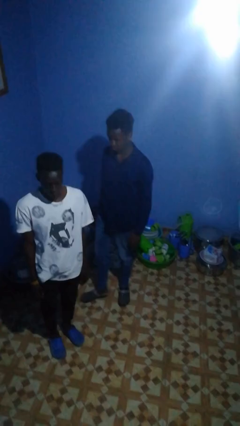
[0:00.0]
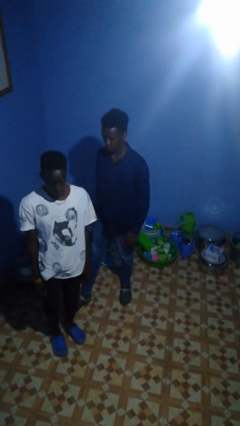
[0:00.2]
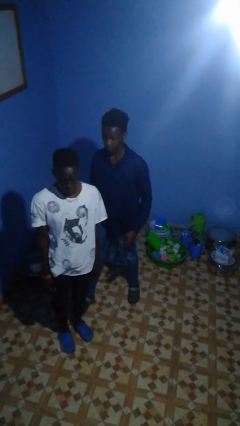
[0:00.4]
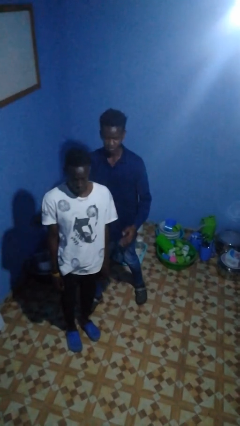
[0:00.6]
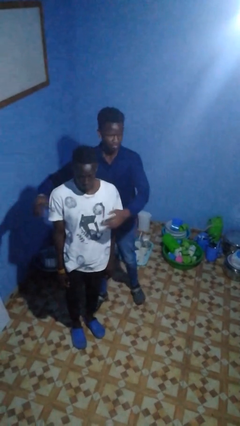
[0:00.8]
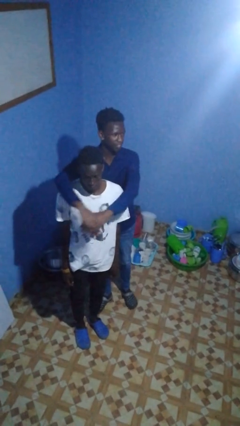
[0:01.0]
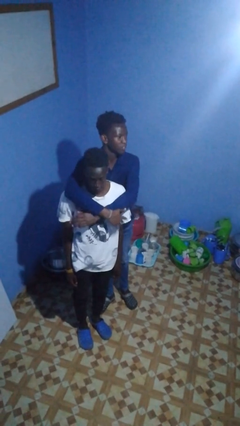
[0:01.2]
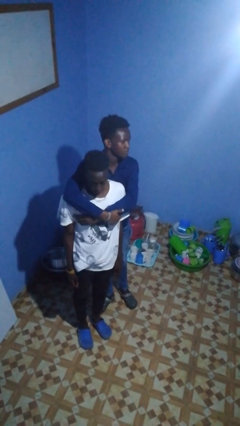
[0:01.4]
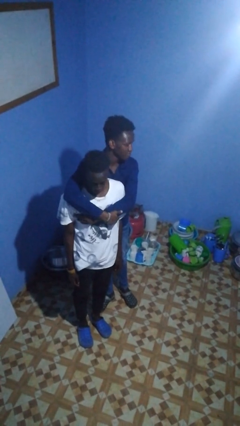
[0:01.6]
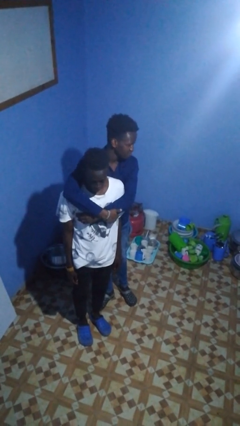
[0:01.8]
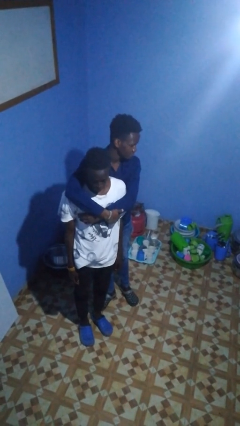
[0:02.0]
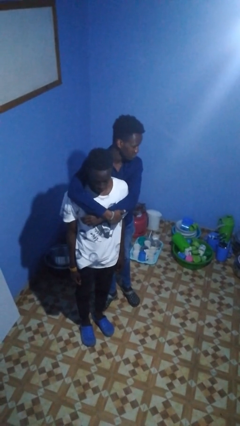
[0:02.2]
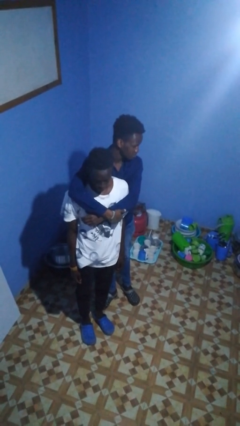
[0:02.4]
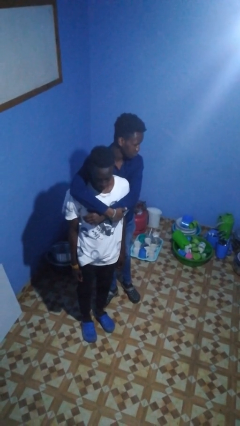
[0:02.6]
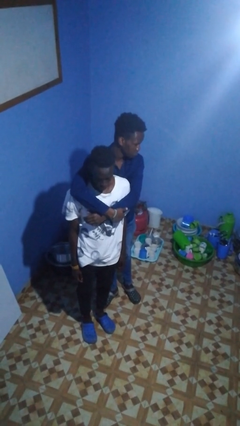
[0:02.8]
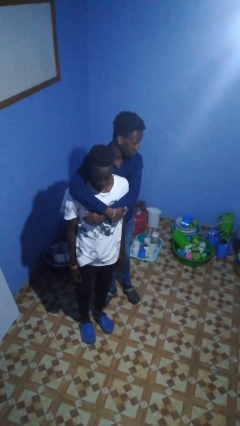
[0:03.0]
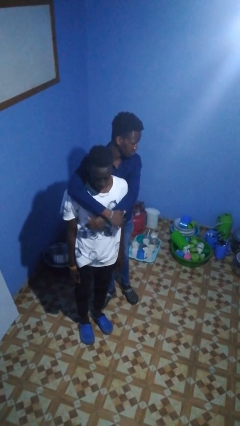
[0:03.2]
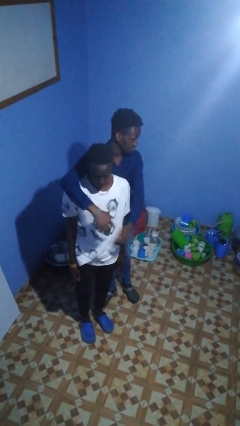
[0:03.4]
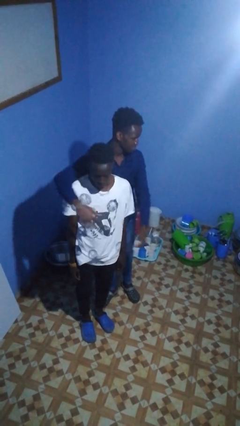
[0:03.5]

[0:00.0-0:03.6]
person hugs person from behind

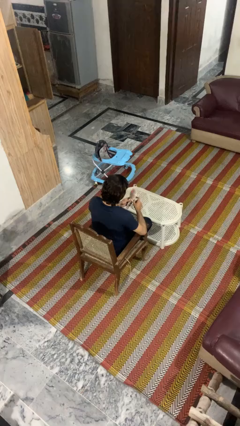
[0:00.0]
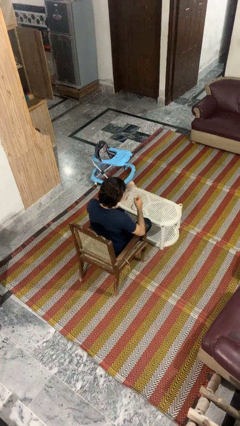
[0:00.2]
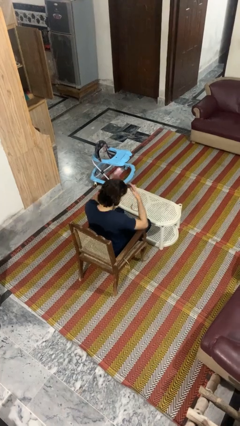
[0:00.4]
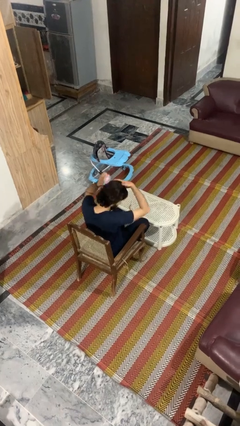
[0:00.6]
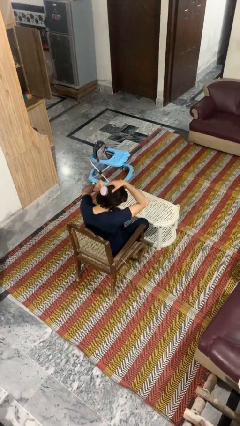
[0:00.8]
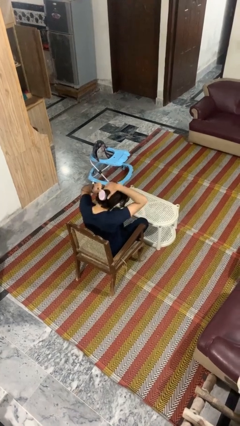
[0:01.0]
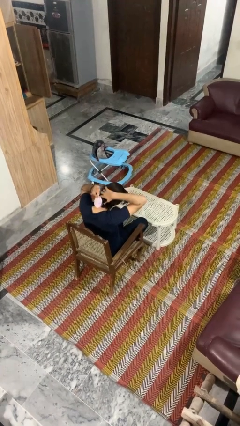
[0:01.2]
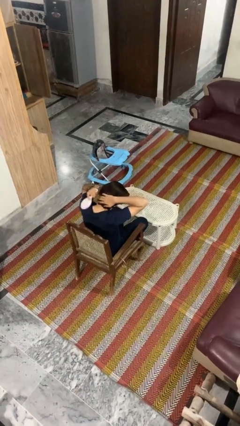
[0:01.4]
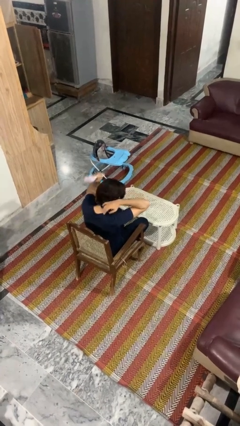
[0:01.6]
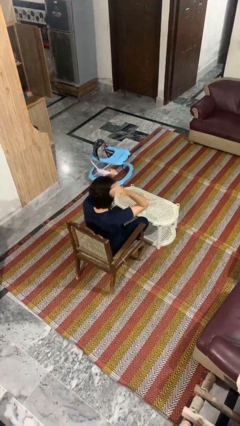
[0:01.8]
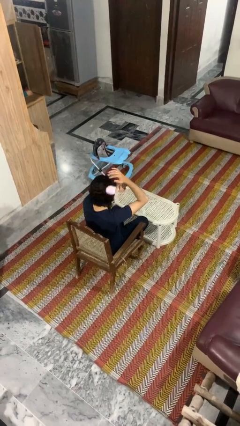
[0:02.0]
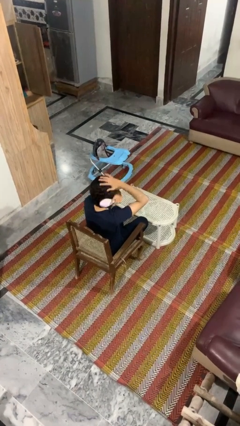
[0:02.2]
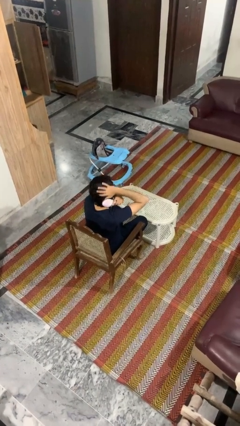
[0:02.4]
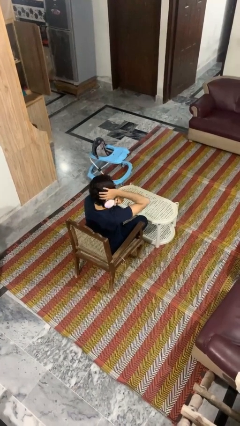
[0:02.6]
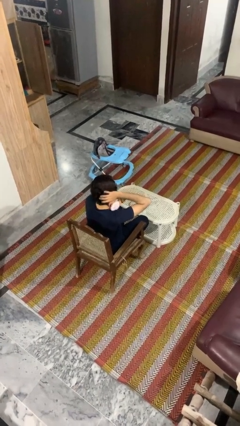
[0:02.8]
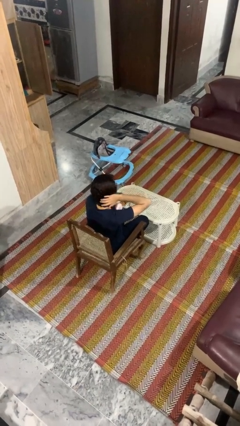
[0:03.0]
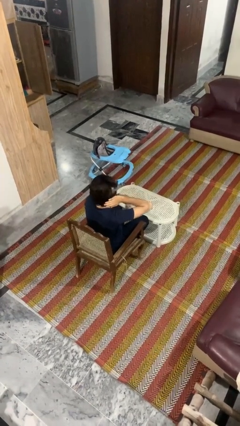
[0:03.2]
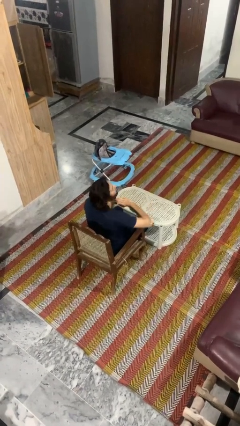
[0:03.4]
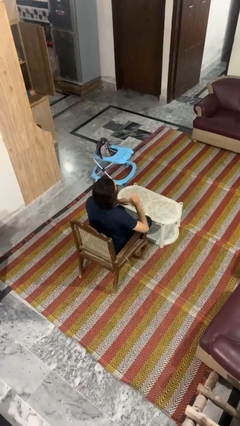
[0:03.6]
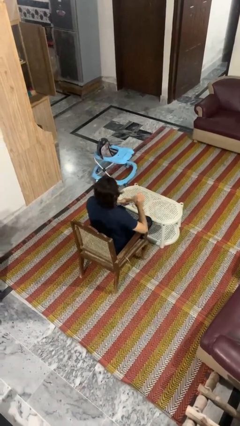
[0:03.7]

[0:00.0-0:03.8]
person brushes hair

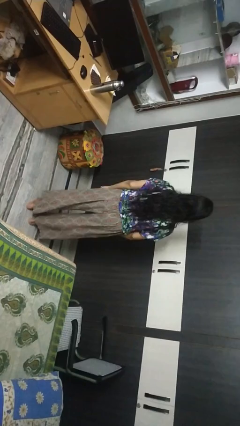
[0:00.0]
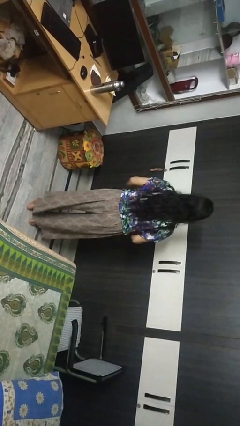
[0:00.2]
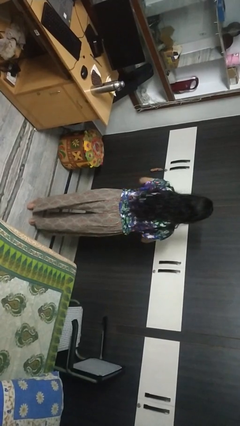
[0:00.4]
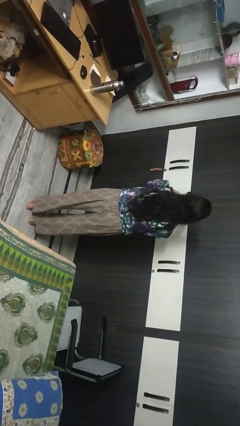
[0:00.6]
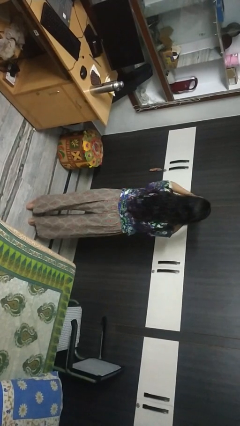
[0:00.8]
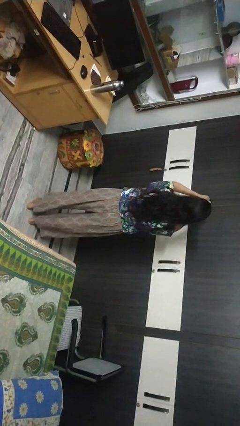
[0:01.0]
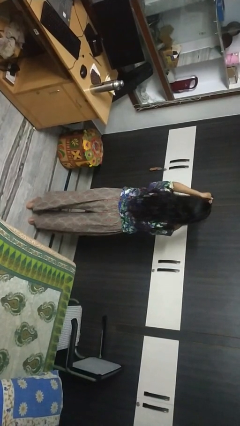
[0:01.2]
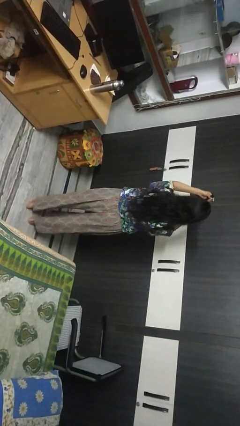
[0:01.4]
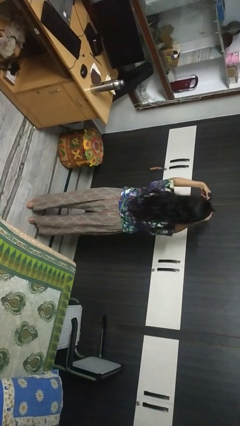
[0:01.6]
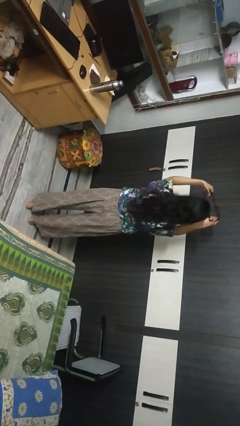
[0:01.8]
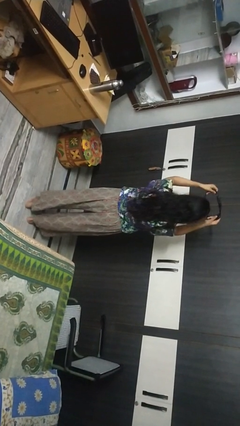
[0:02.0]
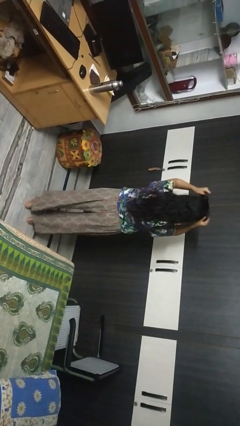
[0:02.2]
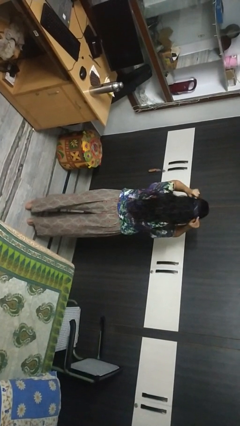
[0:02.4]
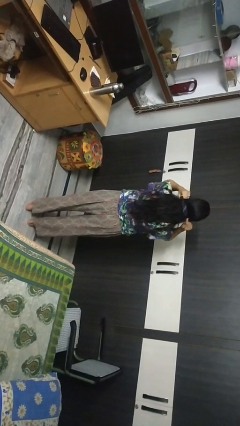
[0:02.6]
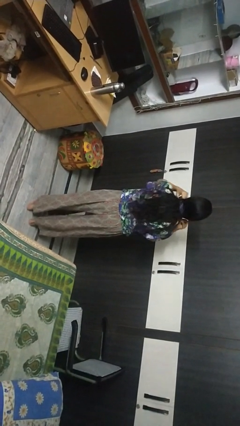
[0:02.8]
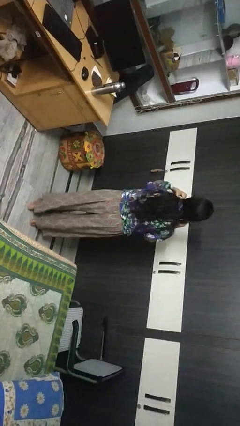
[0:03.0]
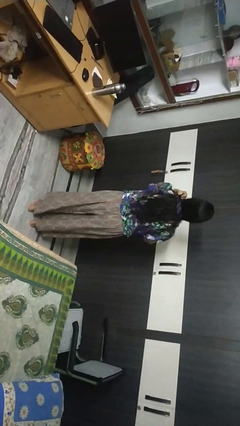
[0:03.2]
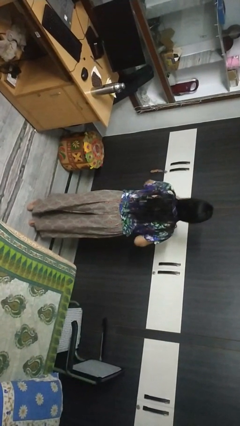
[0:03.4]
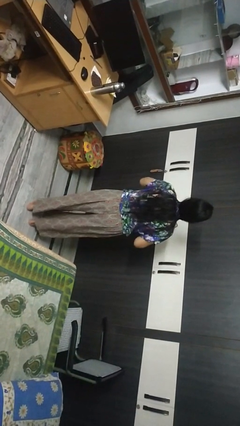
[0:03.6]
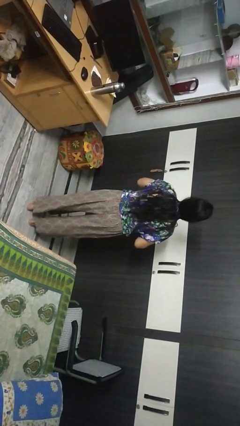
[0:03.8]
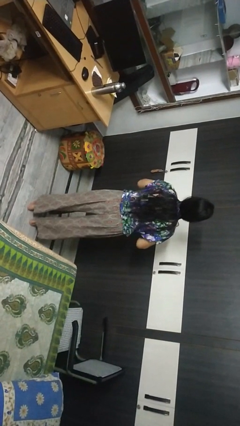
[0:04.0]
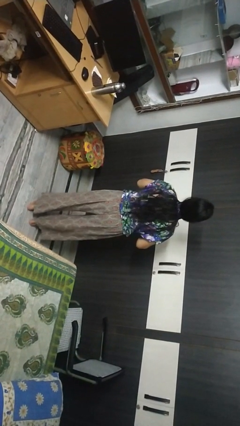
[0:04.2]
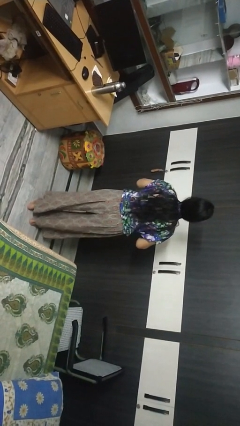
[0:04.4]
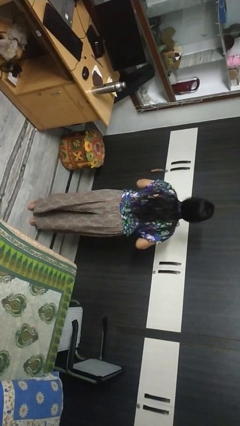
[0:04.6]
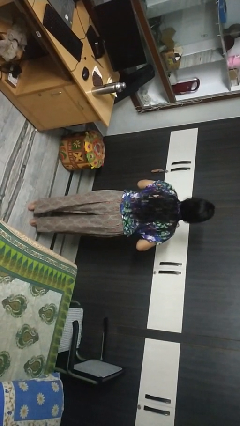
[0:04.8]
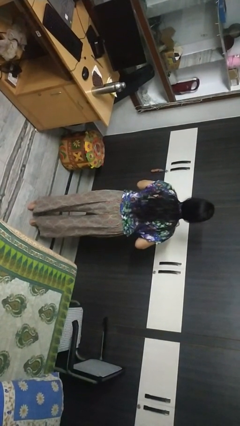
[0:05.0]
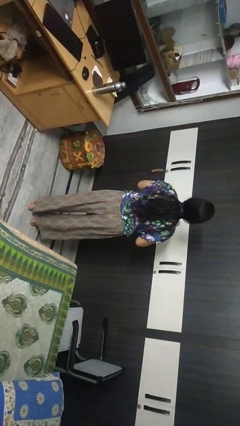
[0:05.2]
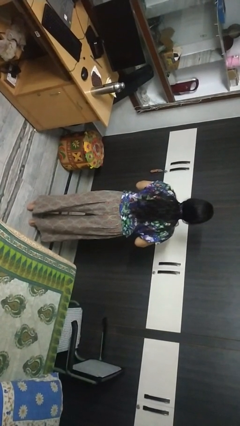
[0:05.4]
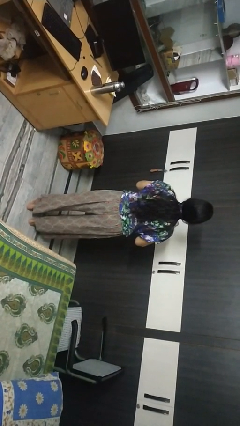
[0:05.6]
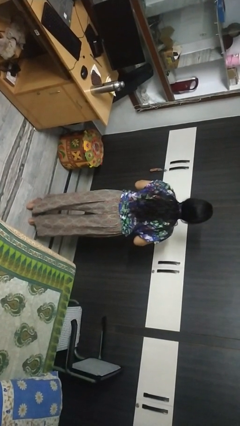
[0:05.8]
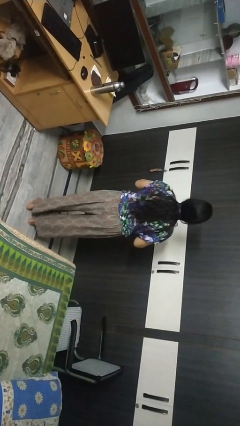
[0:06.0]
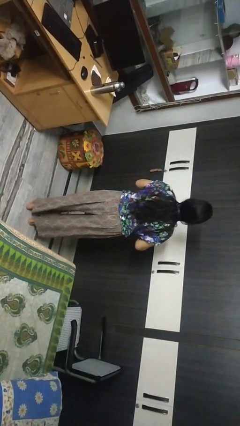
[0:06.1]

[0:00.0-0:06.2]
person puts on necktie

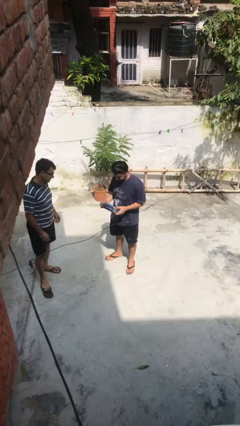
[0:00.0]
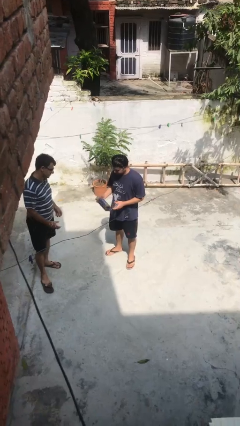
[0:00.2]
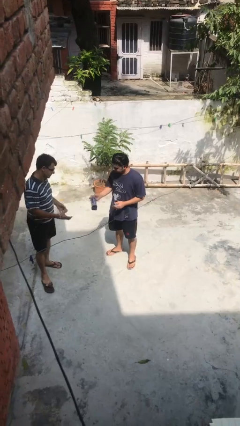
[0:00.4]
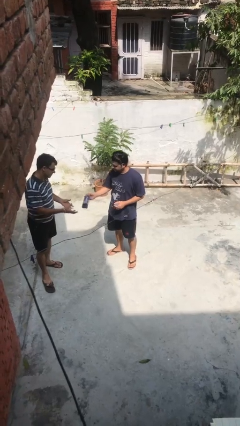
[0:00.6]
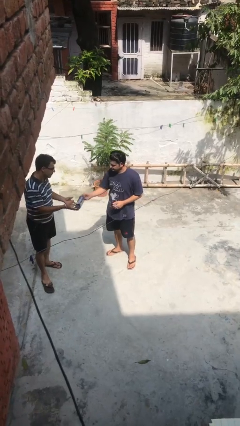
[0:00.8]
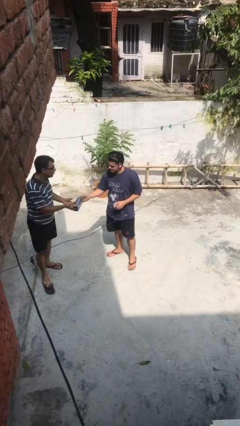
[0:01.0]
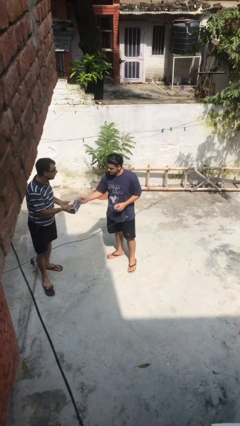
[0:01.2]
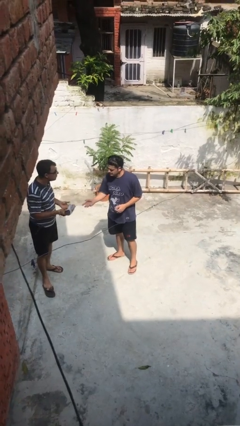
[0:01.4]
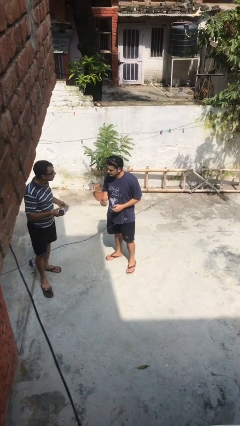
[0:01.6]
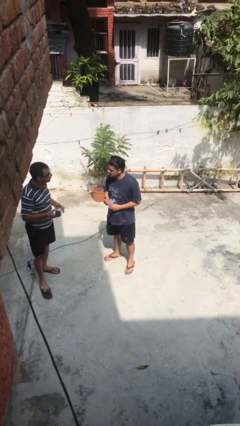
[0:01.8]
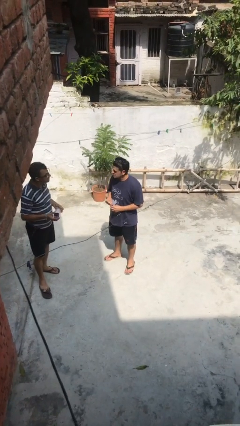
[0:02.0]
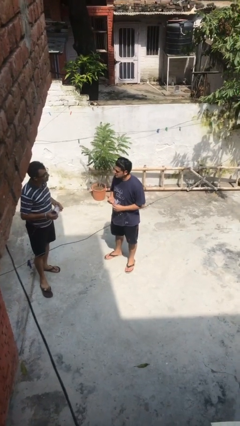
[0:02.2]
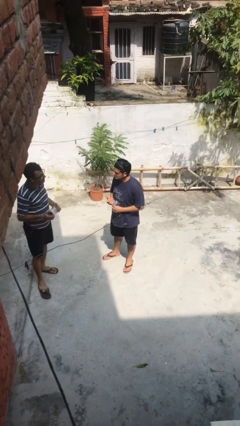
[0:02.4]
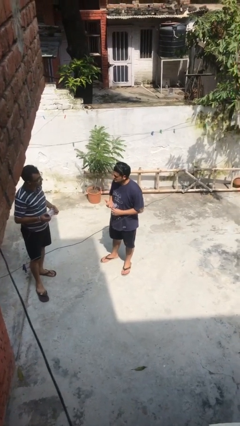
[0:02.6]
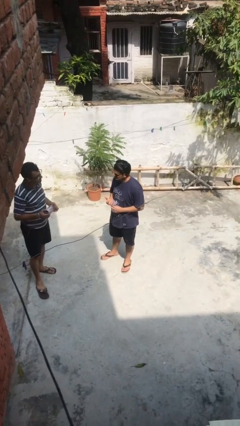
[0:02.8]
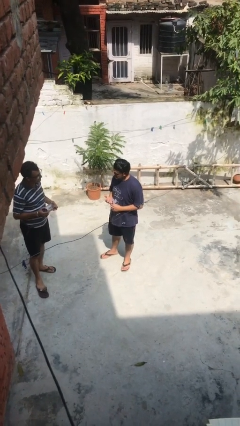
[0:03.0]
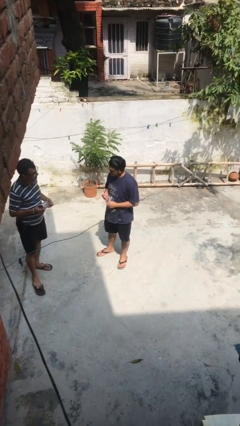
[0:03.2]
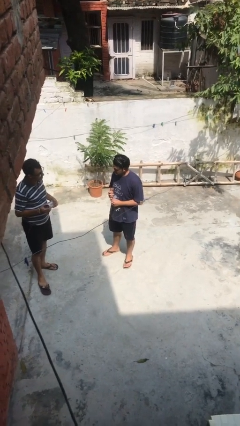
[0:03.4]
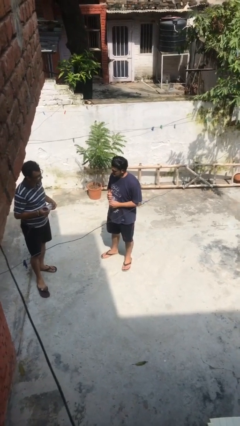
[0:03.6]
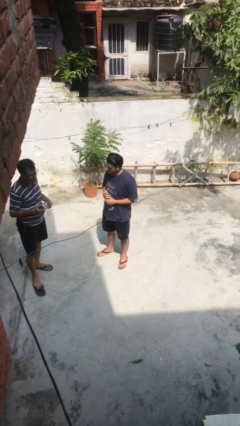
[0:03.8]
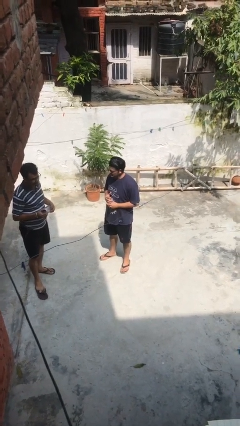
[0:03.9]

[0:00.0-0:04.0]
person transfers object to person
